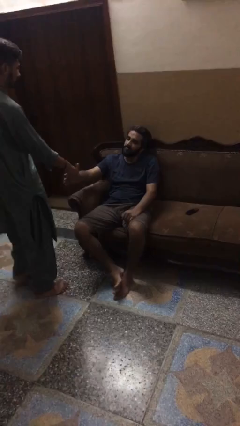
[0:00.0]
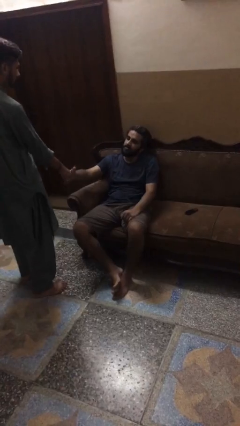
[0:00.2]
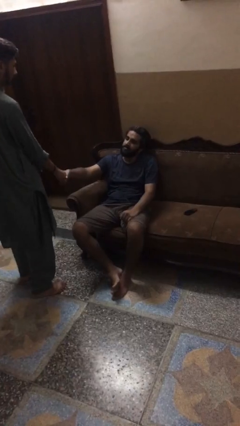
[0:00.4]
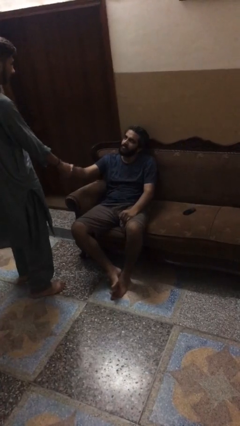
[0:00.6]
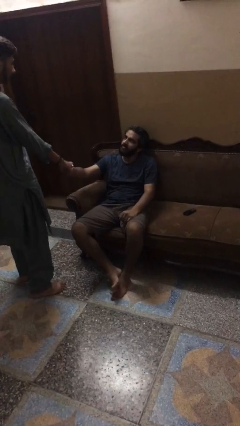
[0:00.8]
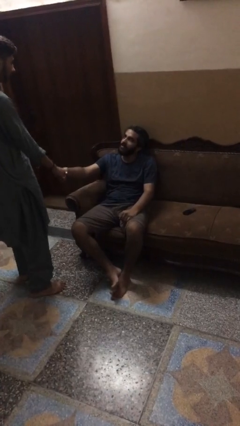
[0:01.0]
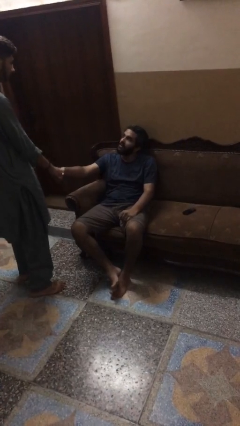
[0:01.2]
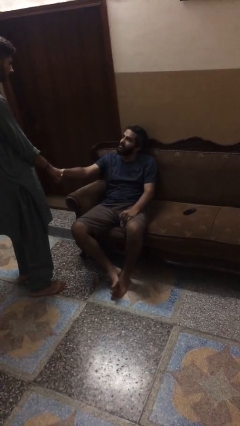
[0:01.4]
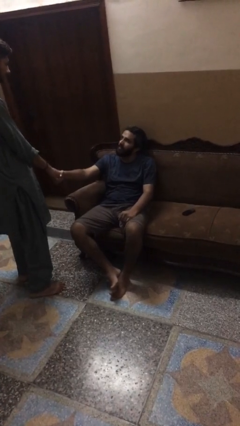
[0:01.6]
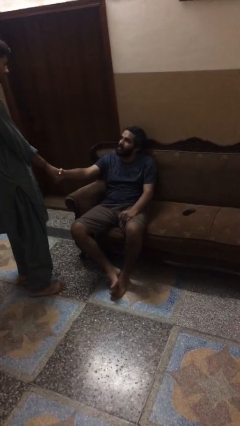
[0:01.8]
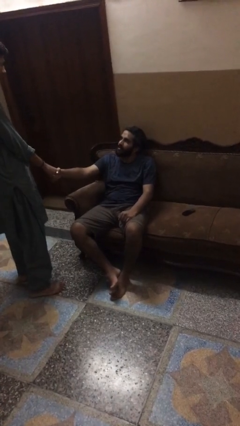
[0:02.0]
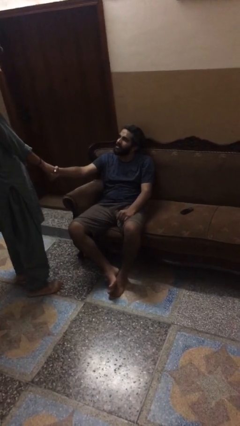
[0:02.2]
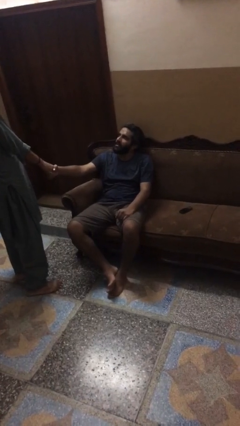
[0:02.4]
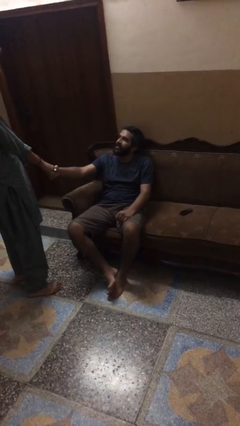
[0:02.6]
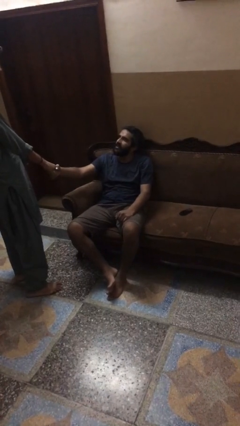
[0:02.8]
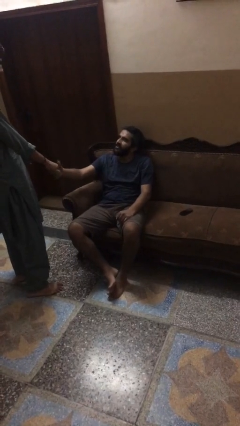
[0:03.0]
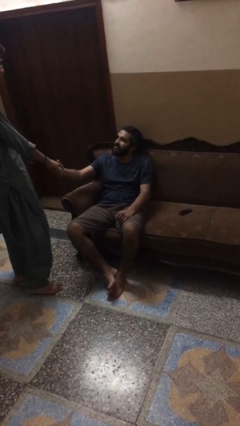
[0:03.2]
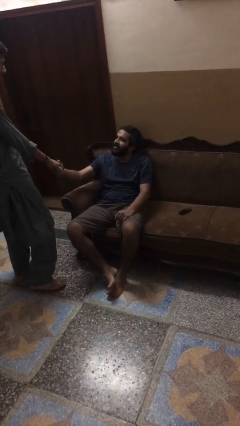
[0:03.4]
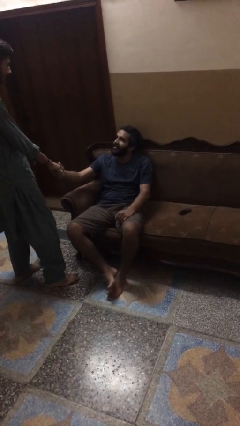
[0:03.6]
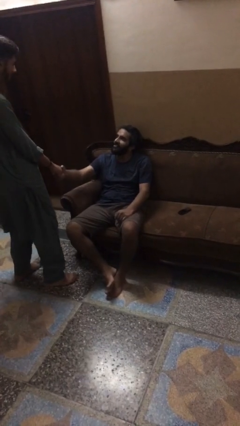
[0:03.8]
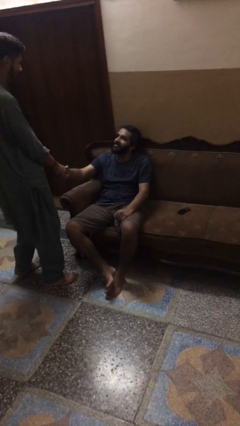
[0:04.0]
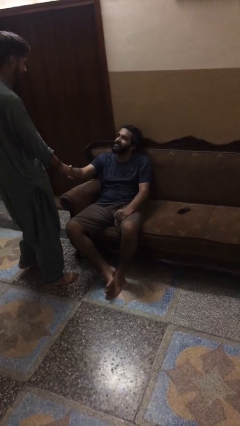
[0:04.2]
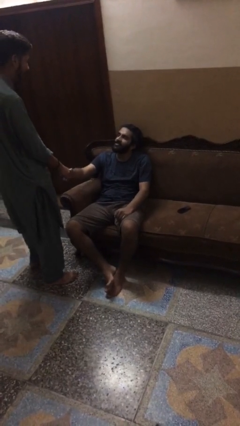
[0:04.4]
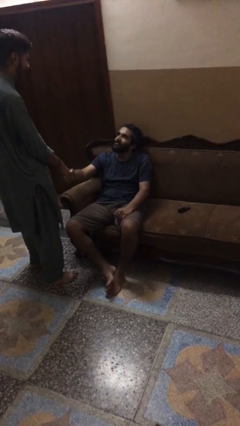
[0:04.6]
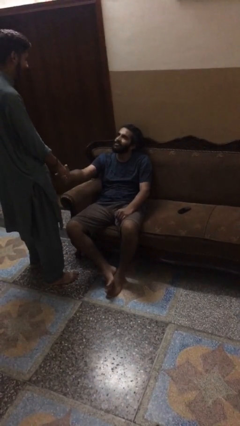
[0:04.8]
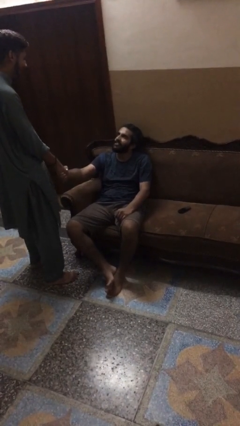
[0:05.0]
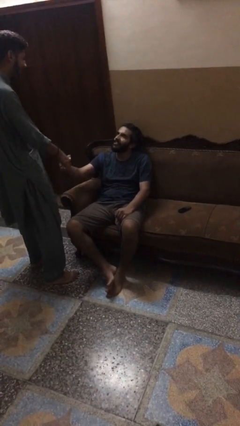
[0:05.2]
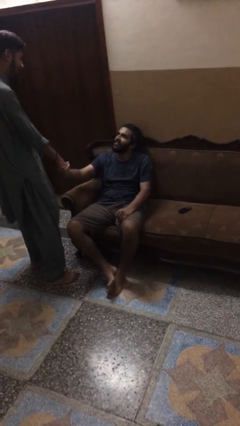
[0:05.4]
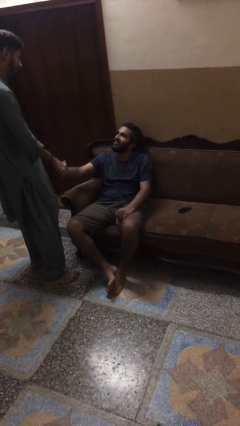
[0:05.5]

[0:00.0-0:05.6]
person shakes hand

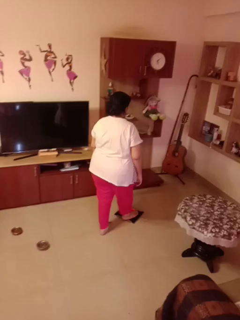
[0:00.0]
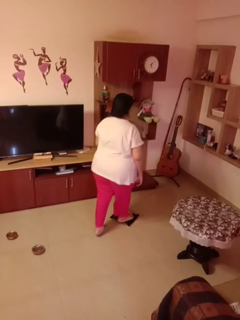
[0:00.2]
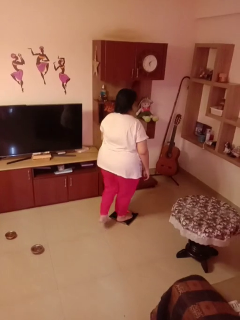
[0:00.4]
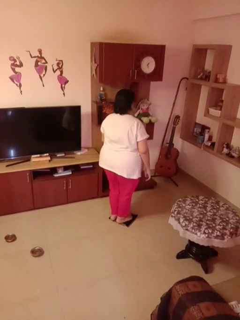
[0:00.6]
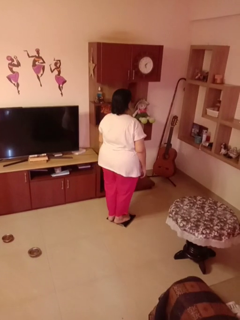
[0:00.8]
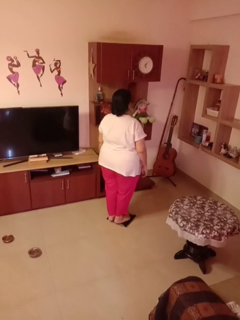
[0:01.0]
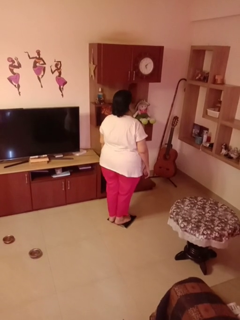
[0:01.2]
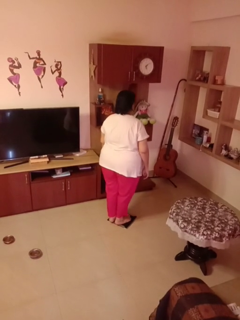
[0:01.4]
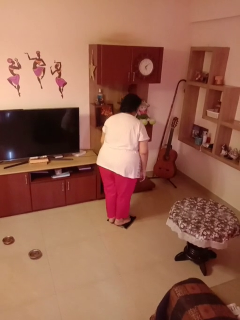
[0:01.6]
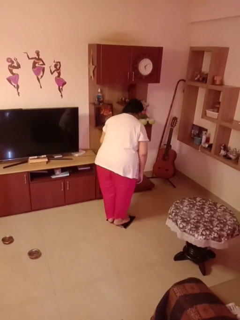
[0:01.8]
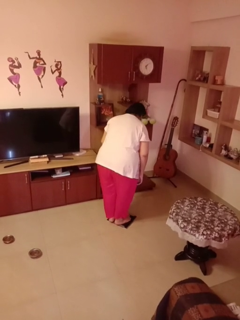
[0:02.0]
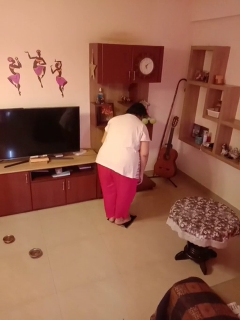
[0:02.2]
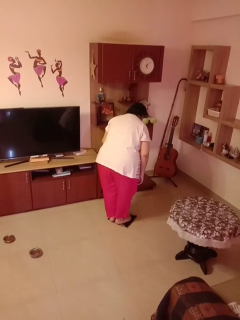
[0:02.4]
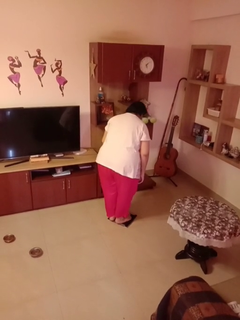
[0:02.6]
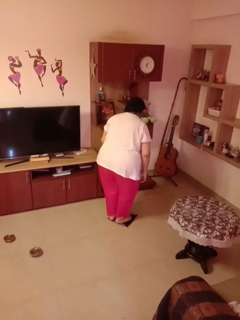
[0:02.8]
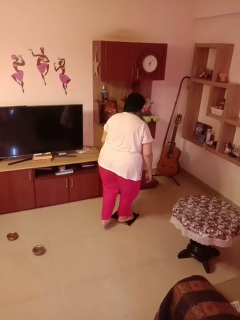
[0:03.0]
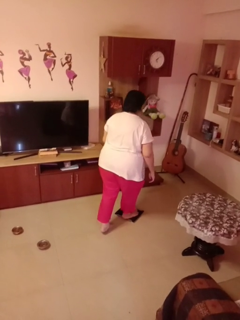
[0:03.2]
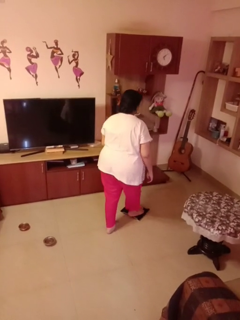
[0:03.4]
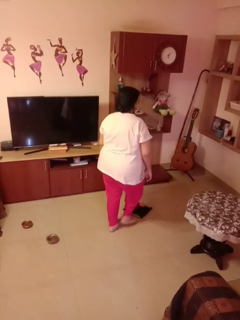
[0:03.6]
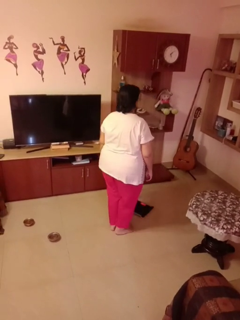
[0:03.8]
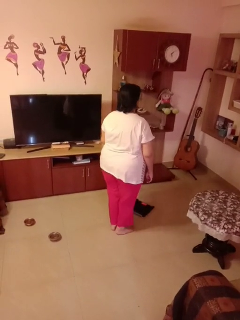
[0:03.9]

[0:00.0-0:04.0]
person uses bodyweight scale

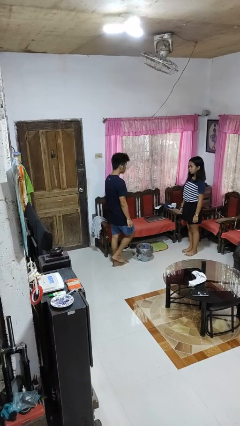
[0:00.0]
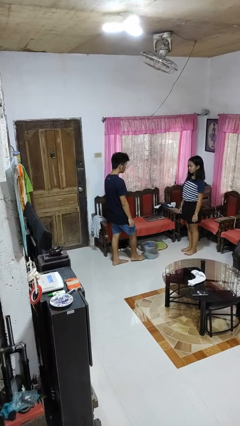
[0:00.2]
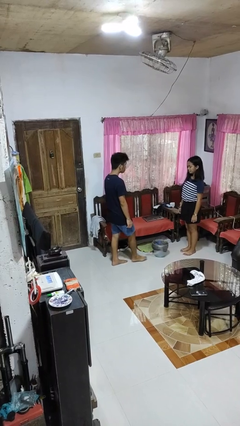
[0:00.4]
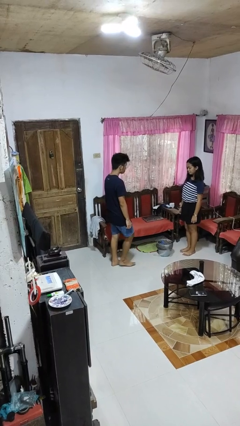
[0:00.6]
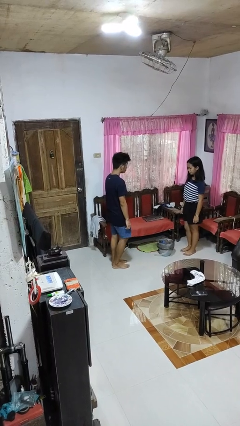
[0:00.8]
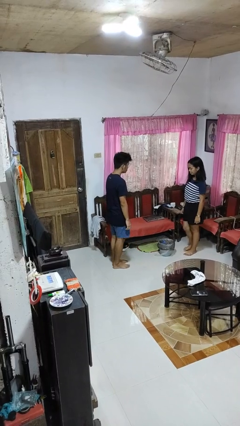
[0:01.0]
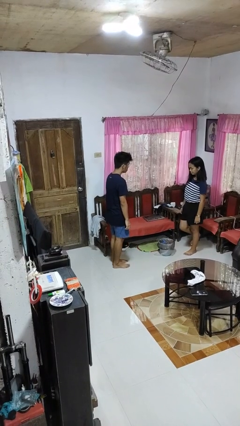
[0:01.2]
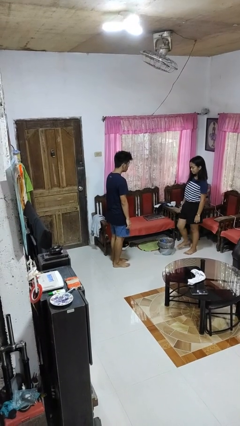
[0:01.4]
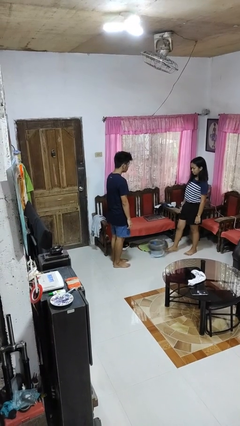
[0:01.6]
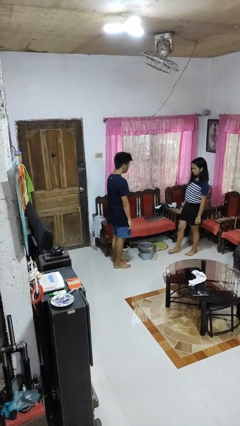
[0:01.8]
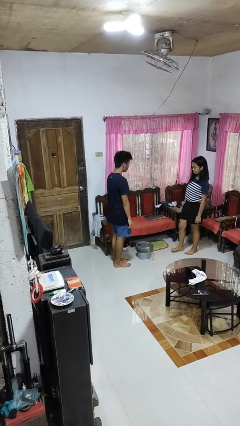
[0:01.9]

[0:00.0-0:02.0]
person kicks object to person

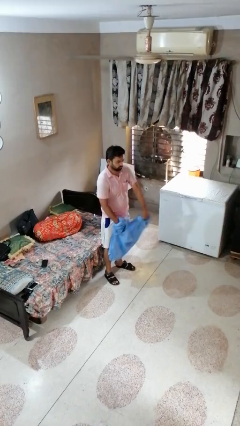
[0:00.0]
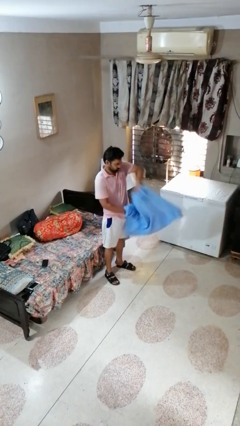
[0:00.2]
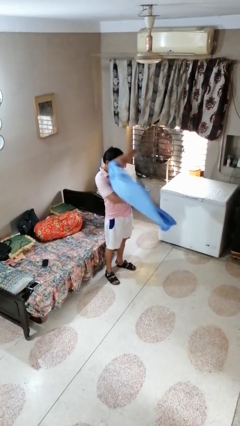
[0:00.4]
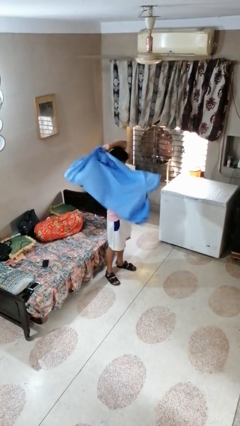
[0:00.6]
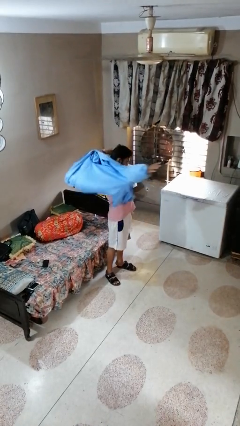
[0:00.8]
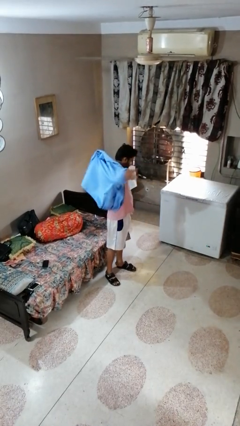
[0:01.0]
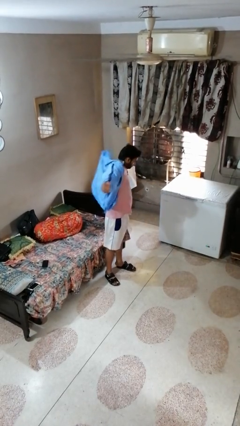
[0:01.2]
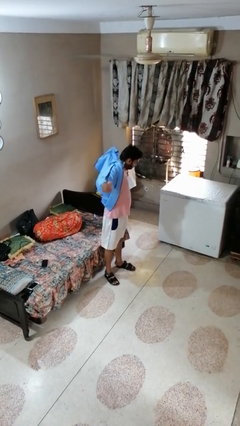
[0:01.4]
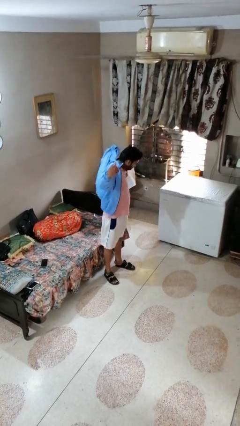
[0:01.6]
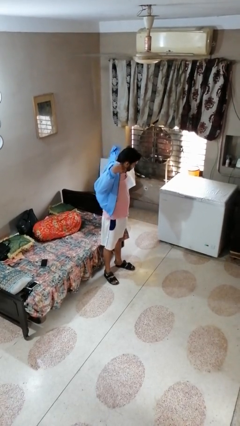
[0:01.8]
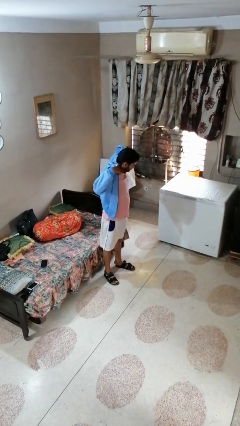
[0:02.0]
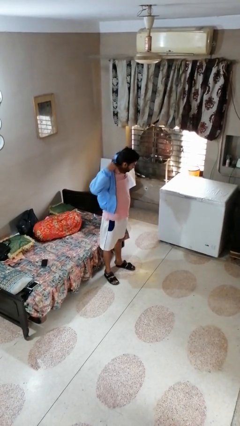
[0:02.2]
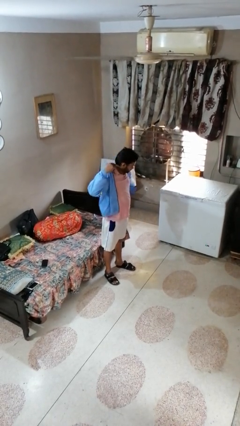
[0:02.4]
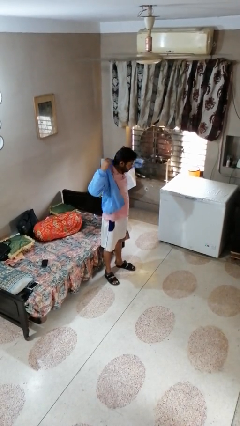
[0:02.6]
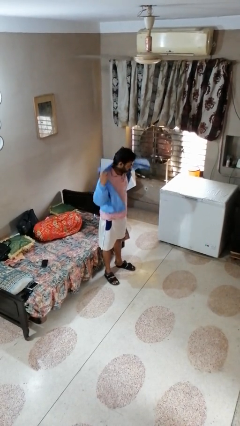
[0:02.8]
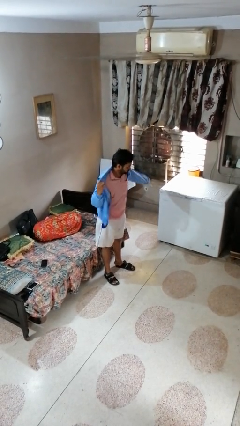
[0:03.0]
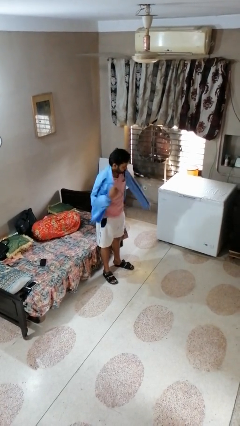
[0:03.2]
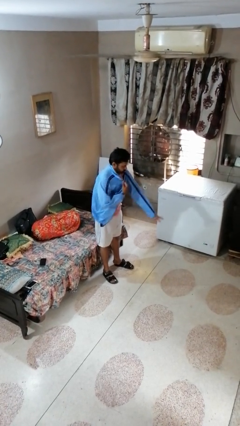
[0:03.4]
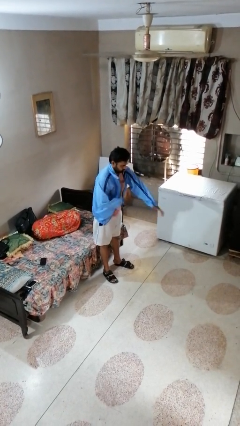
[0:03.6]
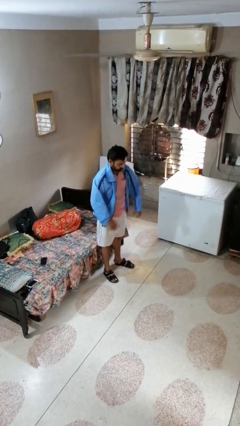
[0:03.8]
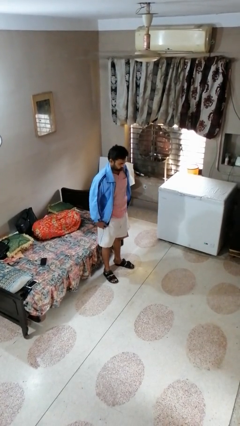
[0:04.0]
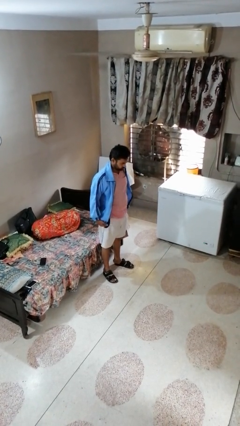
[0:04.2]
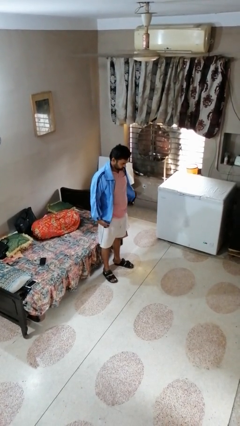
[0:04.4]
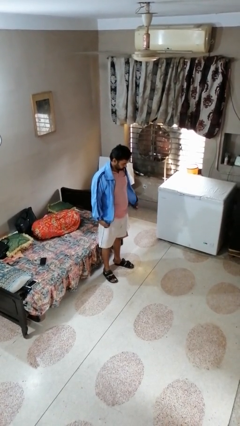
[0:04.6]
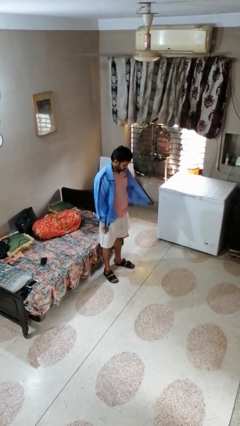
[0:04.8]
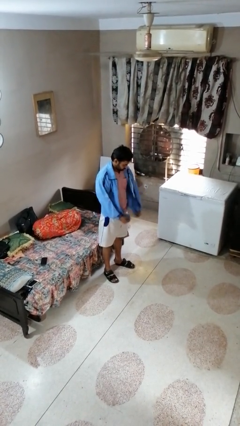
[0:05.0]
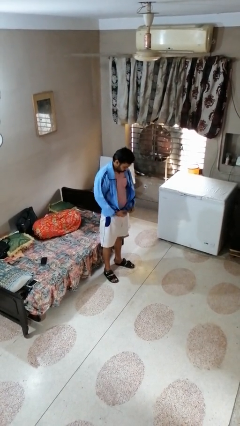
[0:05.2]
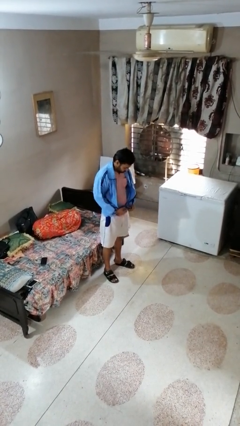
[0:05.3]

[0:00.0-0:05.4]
person puts on jacket

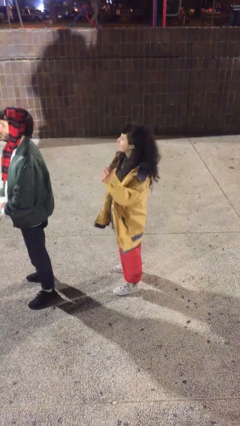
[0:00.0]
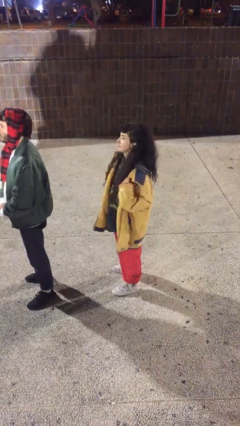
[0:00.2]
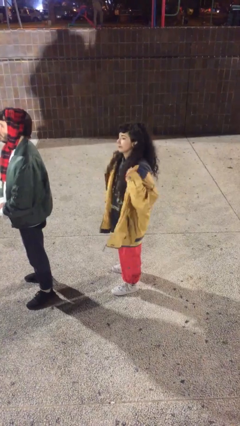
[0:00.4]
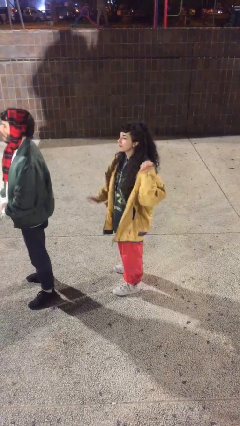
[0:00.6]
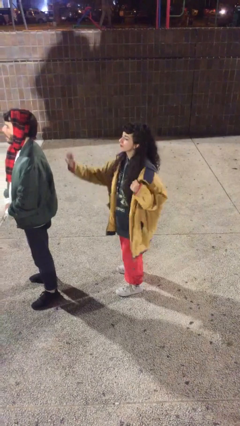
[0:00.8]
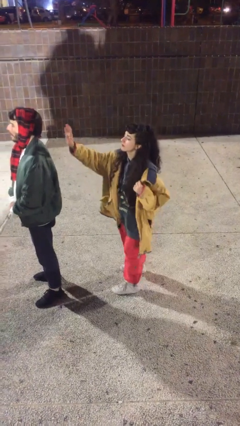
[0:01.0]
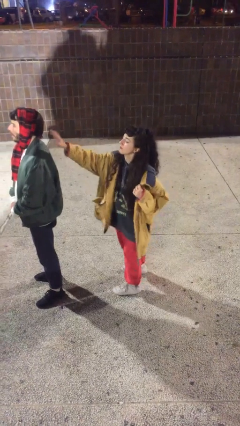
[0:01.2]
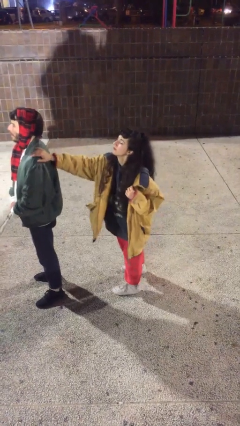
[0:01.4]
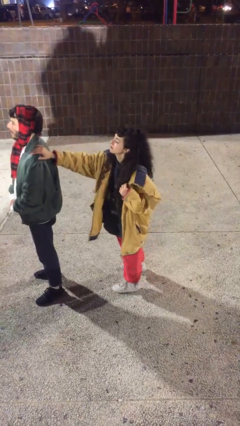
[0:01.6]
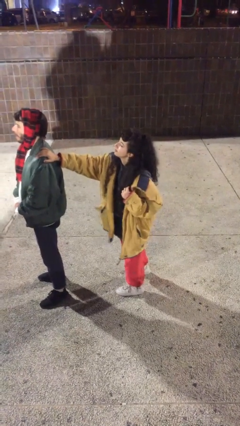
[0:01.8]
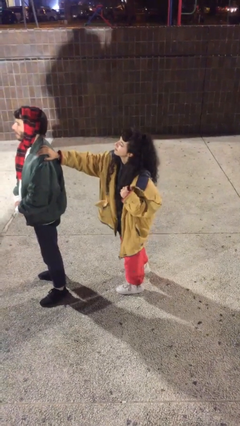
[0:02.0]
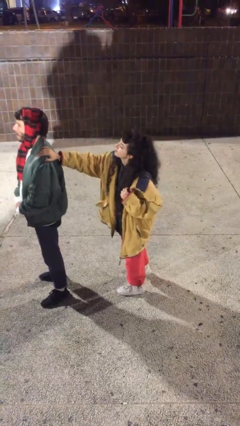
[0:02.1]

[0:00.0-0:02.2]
person grabs person by shoulder
